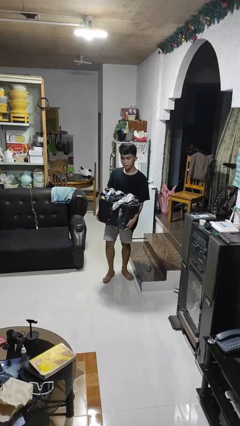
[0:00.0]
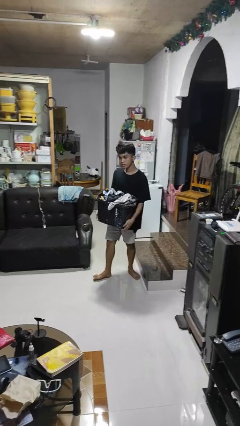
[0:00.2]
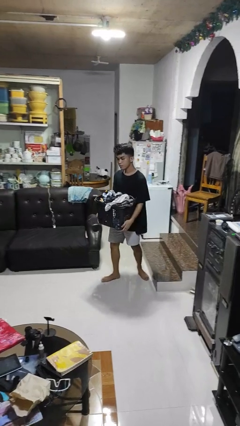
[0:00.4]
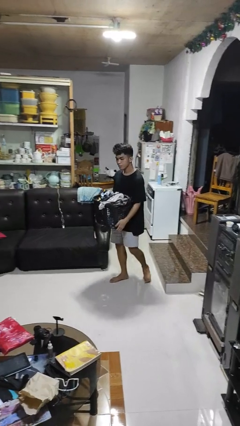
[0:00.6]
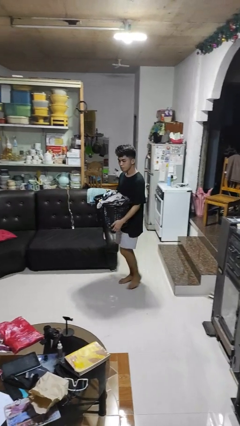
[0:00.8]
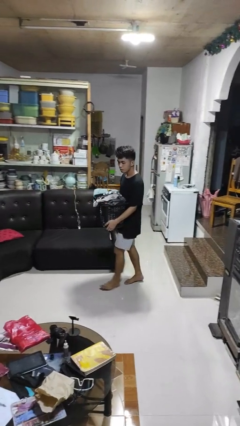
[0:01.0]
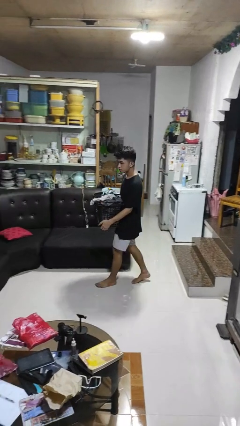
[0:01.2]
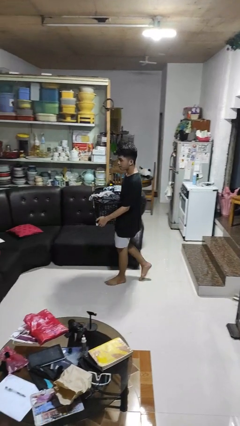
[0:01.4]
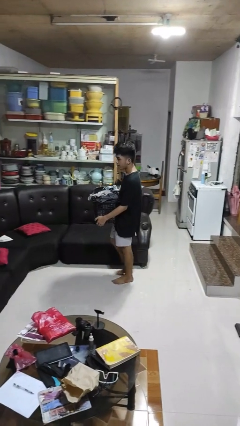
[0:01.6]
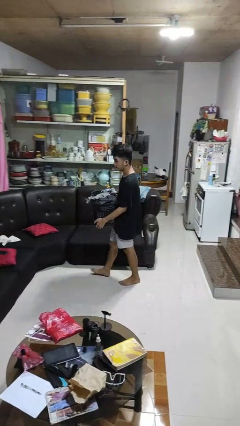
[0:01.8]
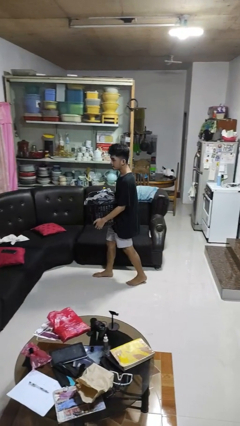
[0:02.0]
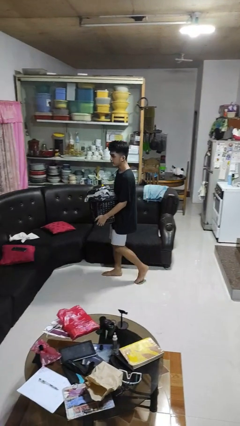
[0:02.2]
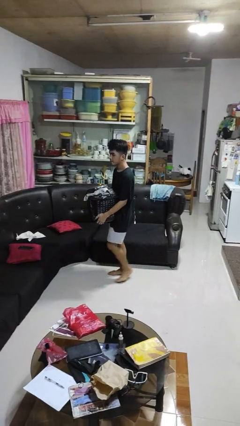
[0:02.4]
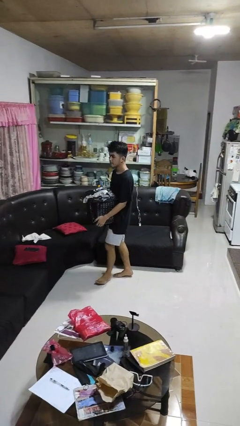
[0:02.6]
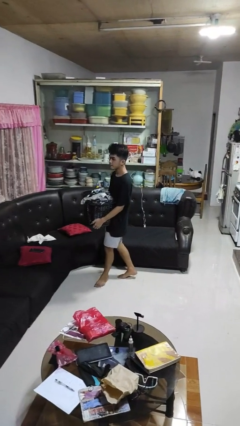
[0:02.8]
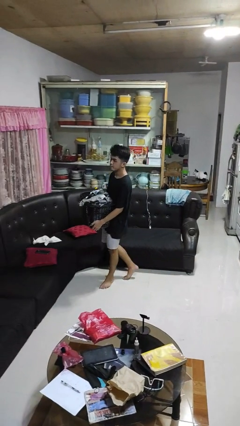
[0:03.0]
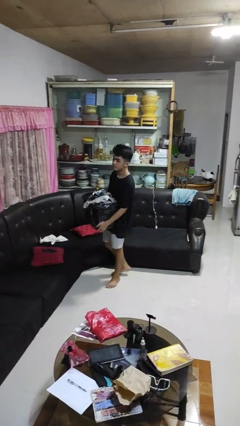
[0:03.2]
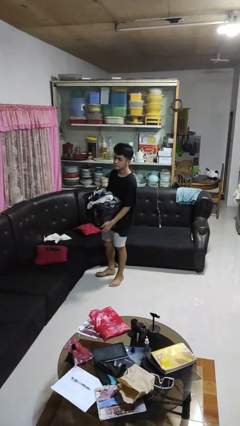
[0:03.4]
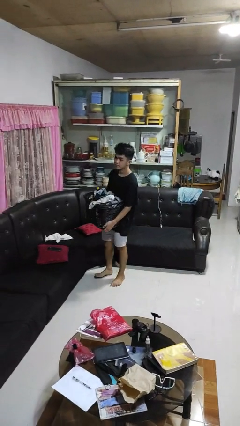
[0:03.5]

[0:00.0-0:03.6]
person carries laundry basket

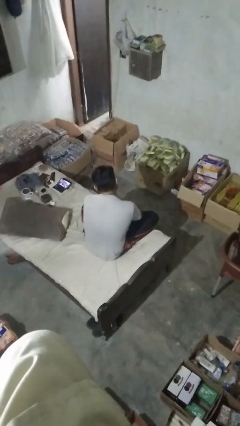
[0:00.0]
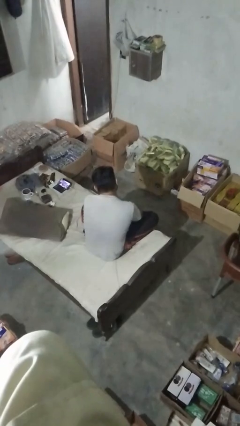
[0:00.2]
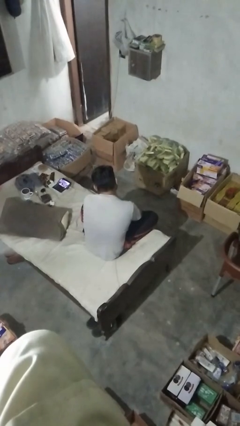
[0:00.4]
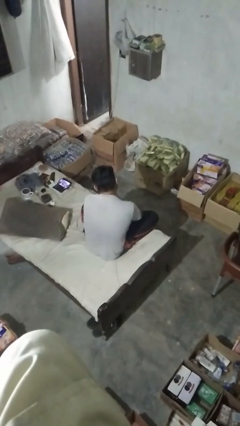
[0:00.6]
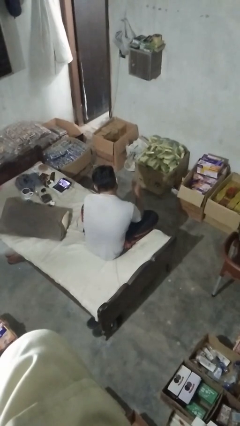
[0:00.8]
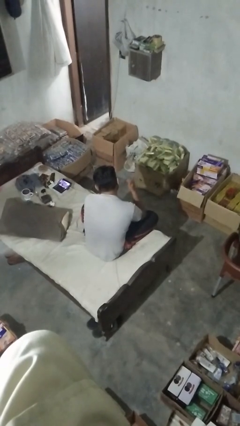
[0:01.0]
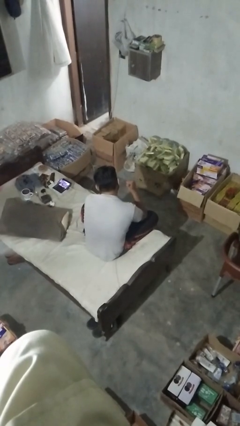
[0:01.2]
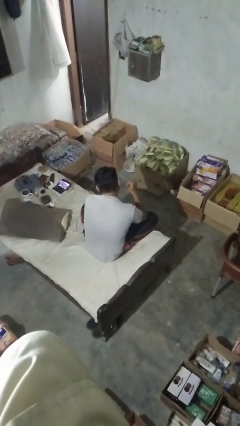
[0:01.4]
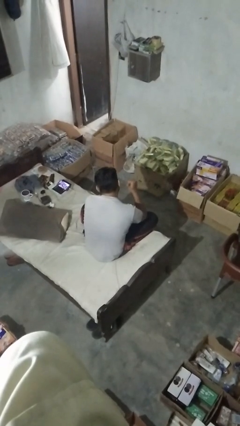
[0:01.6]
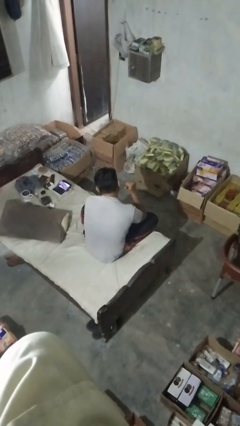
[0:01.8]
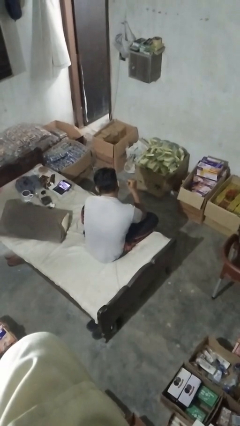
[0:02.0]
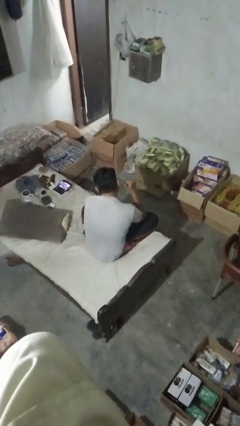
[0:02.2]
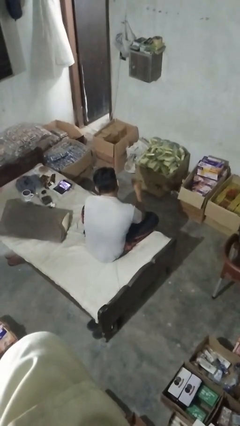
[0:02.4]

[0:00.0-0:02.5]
person gestures behind me

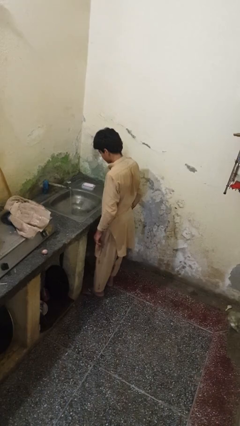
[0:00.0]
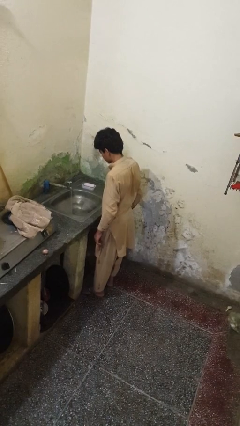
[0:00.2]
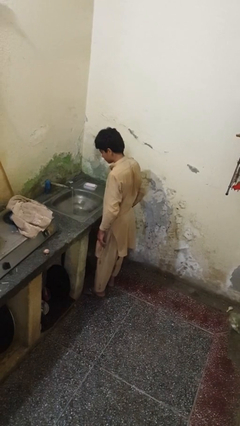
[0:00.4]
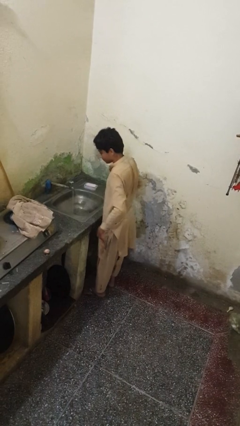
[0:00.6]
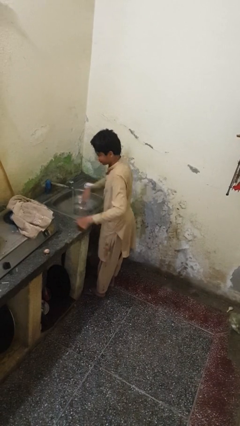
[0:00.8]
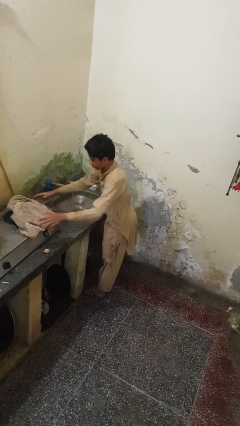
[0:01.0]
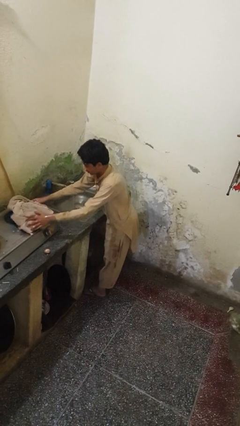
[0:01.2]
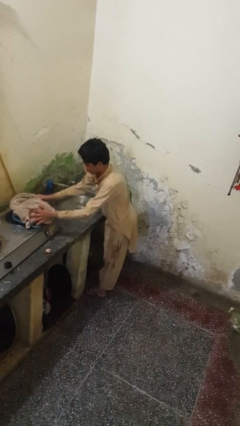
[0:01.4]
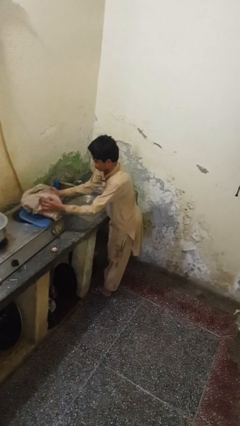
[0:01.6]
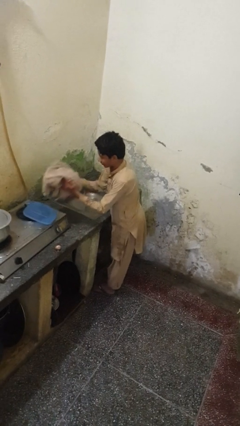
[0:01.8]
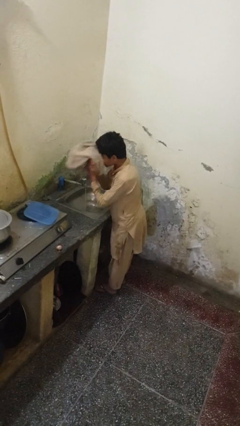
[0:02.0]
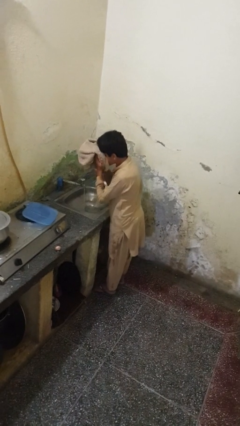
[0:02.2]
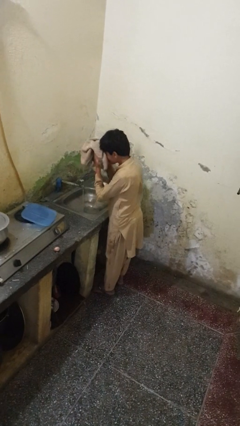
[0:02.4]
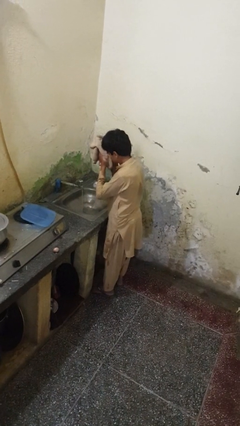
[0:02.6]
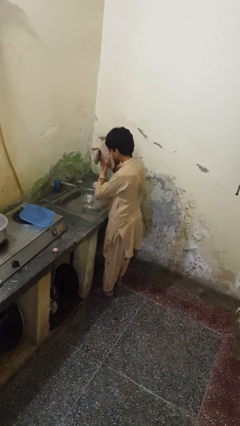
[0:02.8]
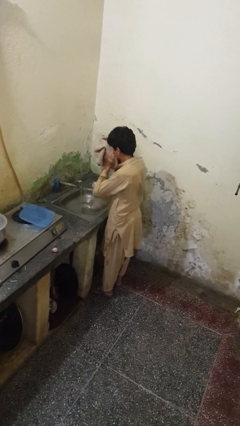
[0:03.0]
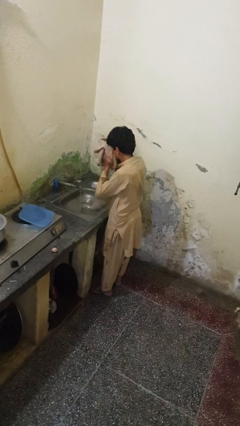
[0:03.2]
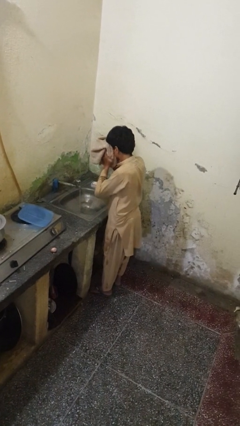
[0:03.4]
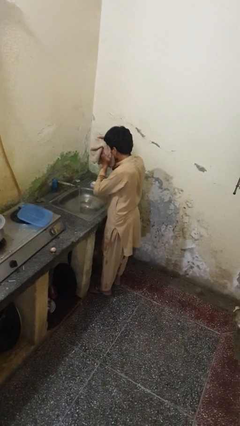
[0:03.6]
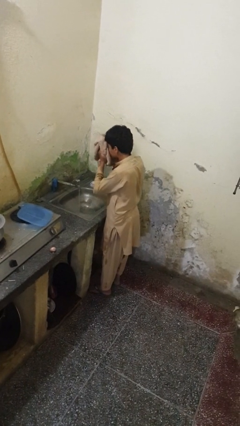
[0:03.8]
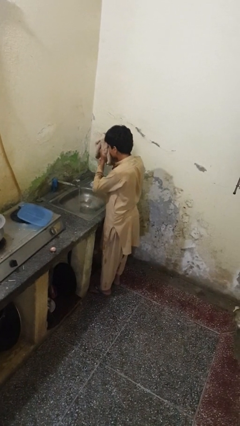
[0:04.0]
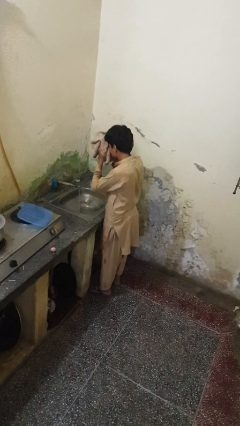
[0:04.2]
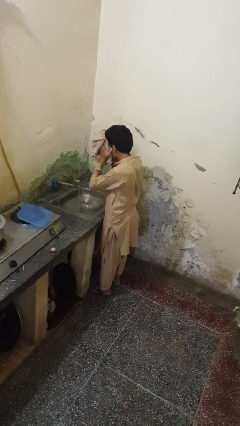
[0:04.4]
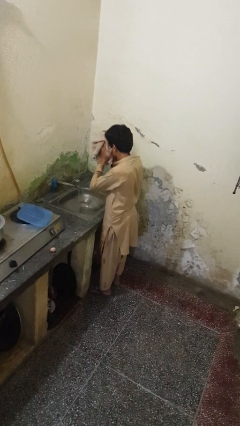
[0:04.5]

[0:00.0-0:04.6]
person dries face with towel

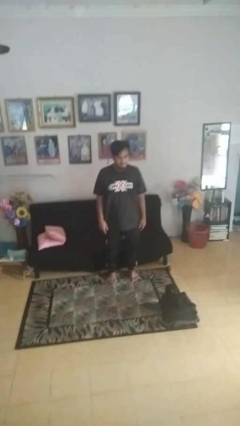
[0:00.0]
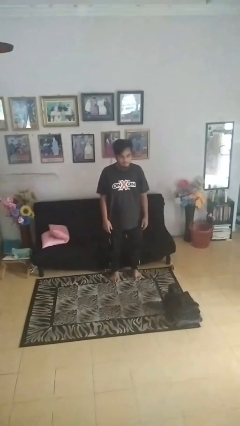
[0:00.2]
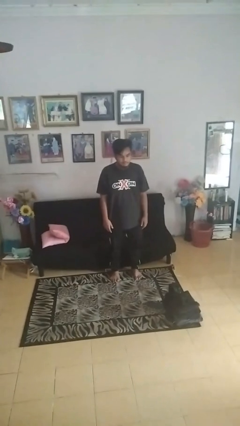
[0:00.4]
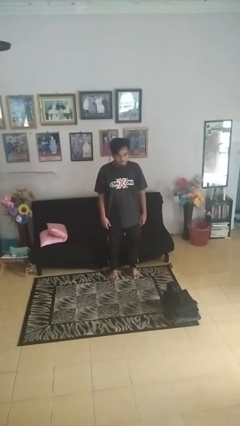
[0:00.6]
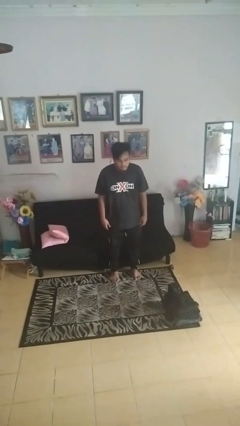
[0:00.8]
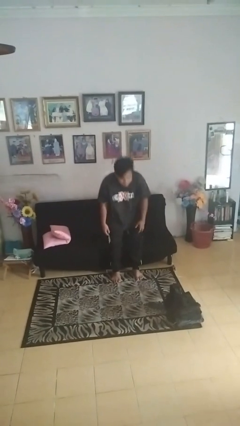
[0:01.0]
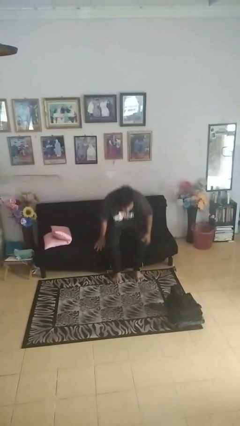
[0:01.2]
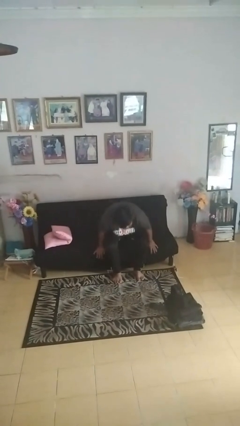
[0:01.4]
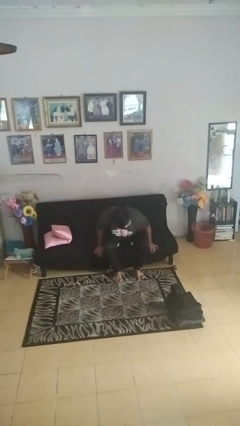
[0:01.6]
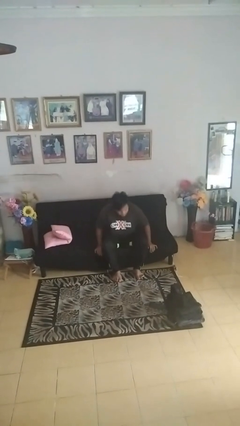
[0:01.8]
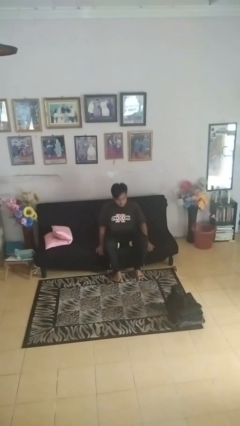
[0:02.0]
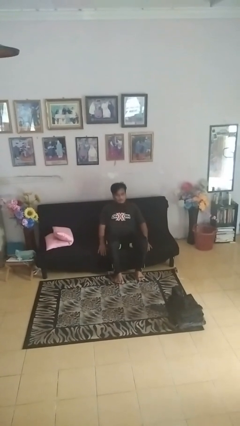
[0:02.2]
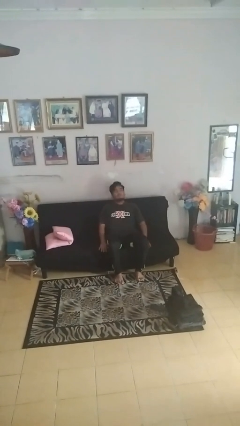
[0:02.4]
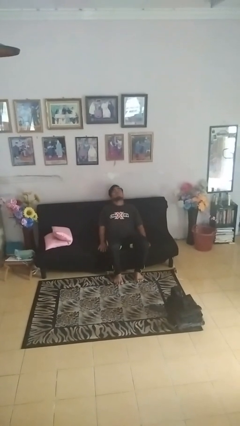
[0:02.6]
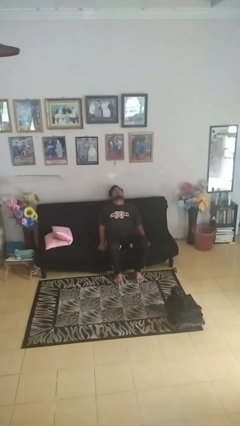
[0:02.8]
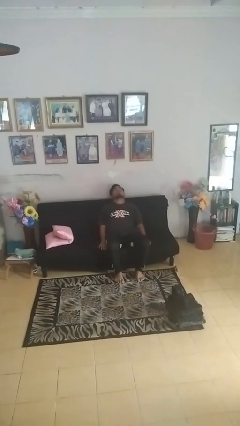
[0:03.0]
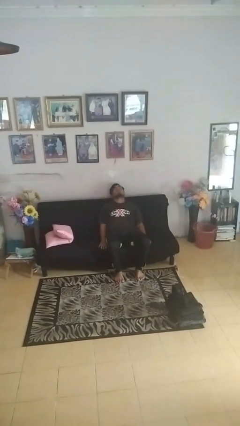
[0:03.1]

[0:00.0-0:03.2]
person lies down on couch

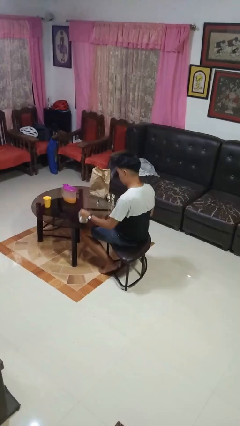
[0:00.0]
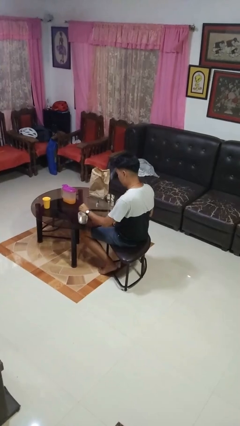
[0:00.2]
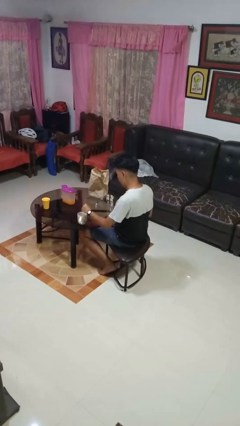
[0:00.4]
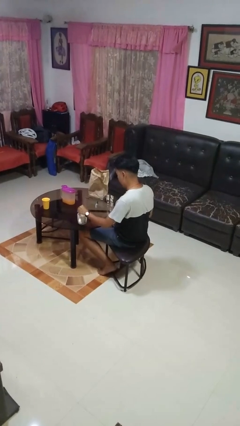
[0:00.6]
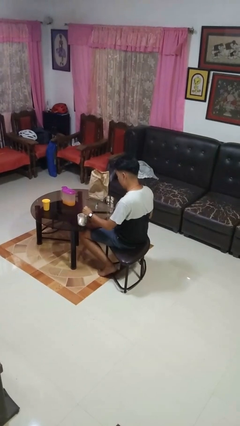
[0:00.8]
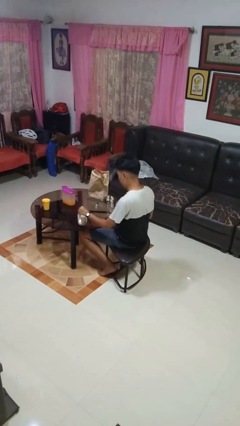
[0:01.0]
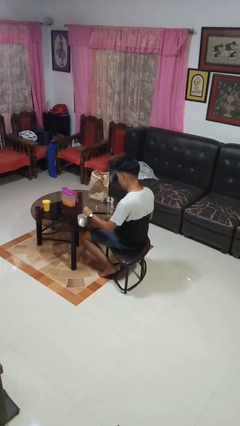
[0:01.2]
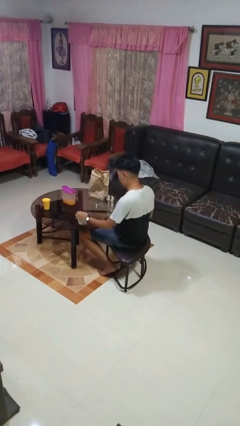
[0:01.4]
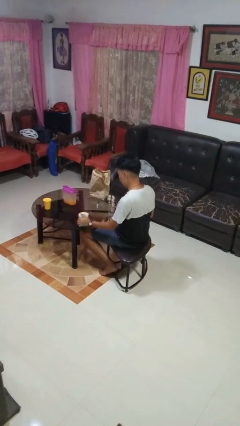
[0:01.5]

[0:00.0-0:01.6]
person stirs mug

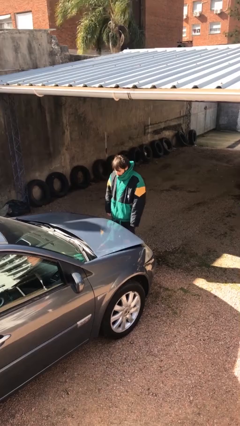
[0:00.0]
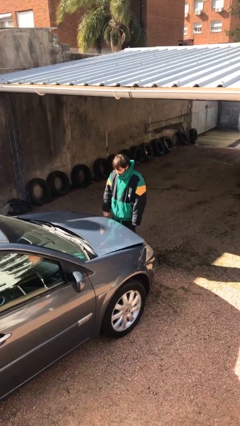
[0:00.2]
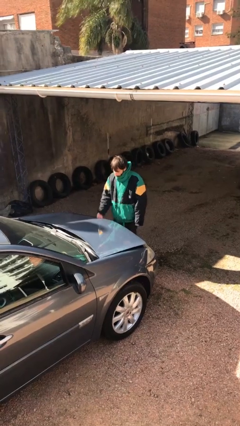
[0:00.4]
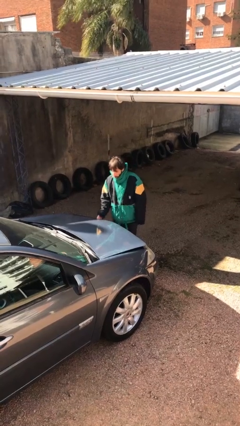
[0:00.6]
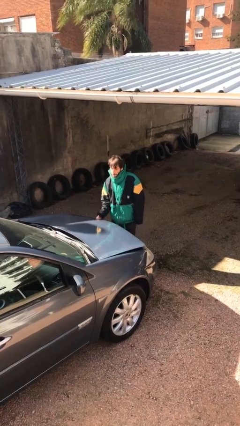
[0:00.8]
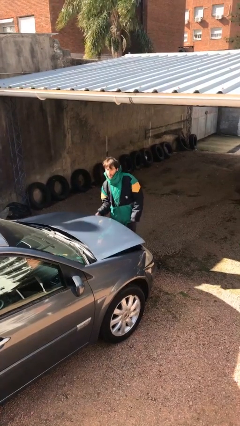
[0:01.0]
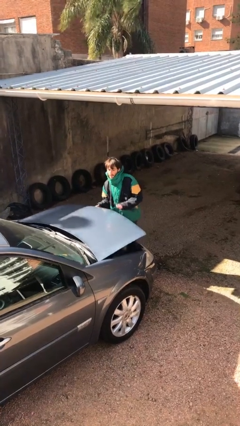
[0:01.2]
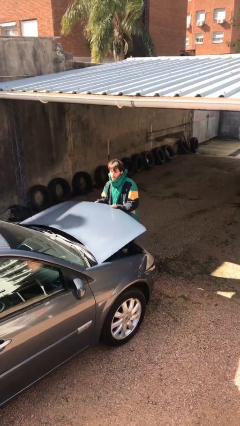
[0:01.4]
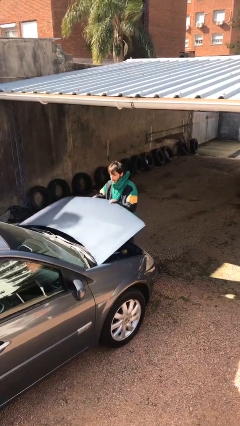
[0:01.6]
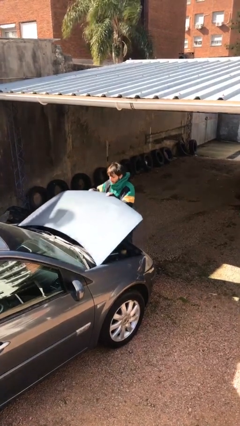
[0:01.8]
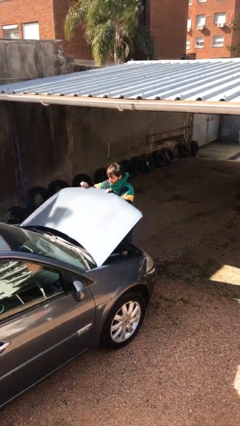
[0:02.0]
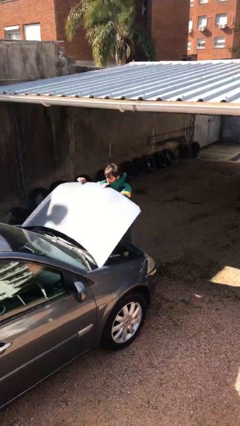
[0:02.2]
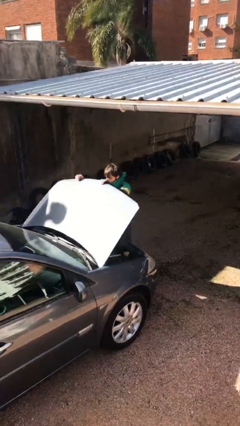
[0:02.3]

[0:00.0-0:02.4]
person opens car hood
